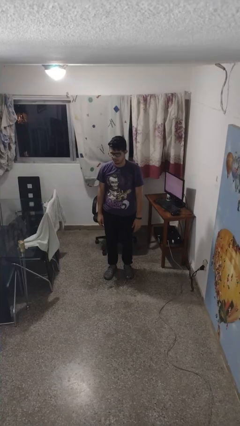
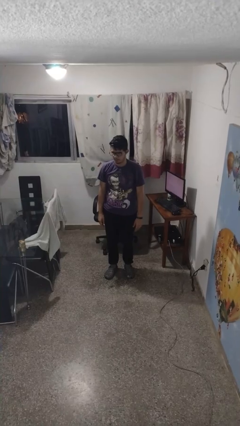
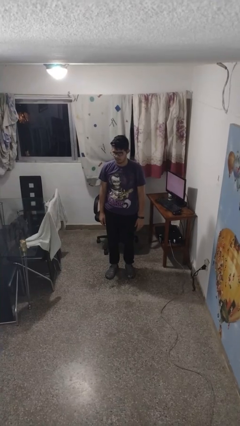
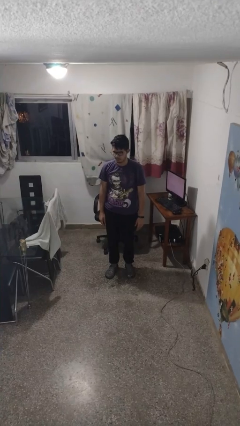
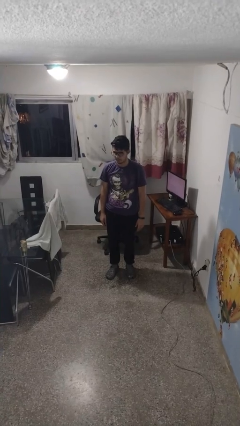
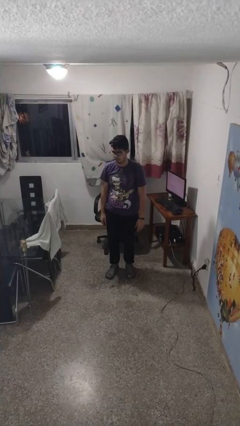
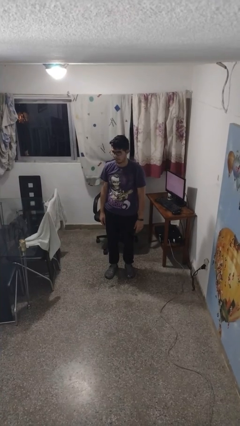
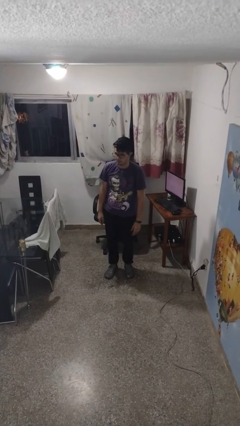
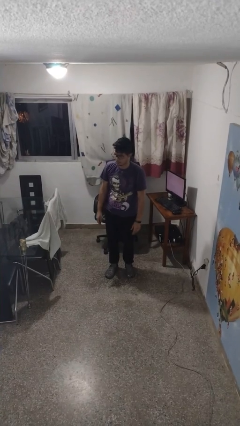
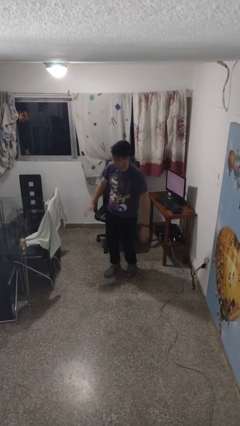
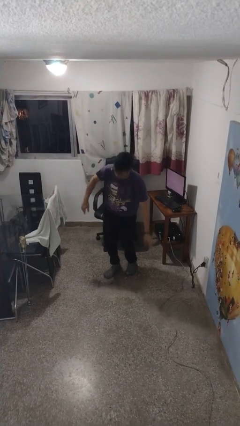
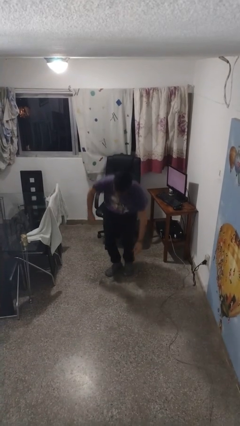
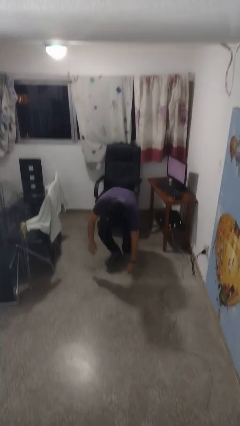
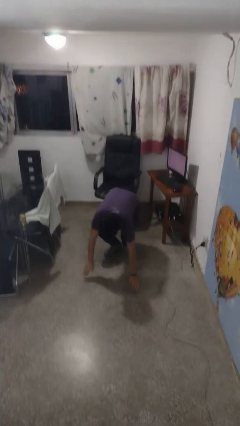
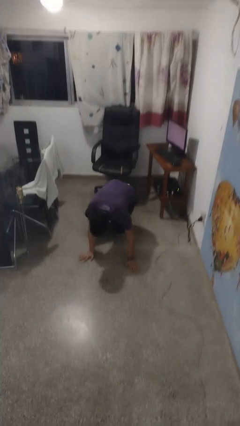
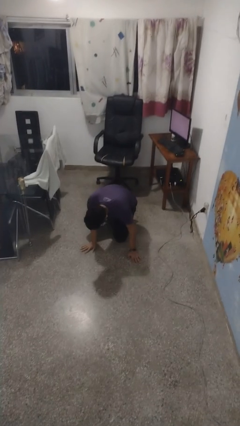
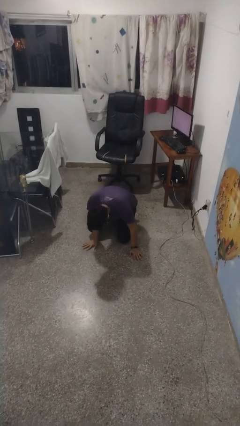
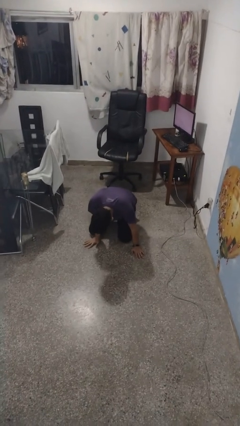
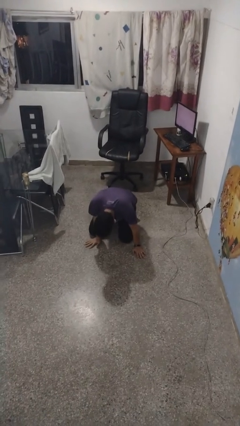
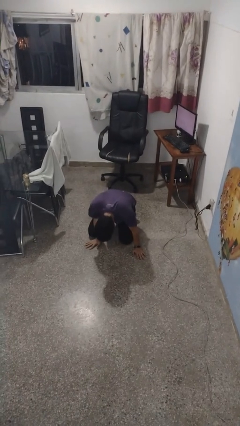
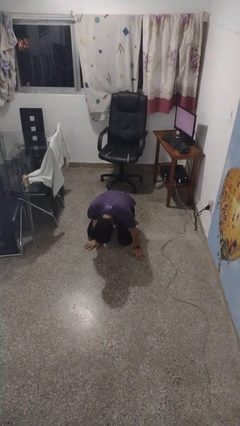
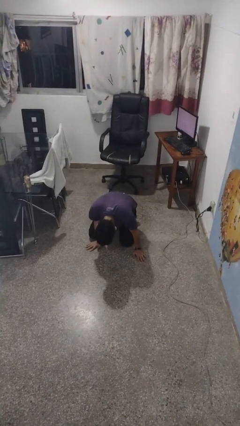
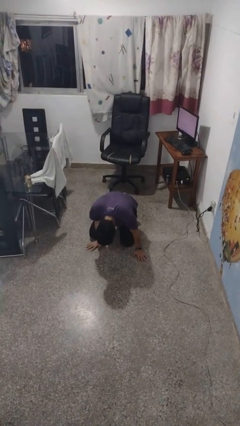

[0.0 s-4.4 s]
person falls while standing

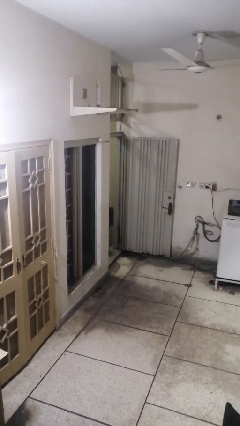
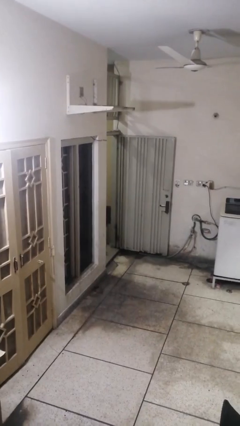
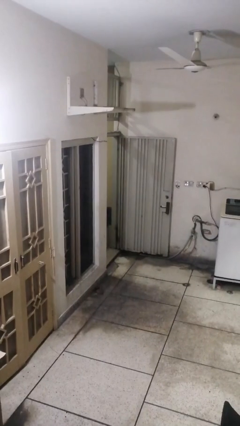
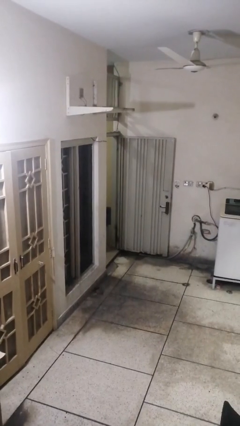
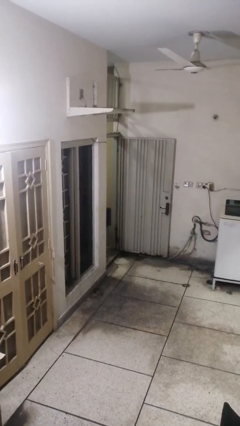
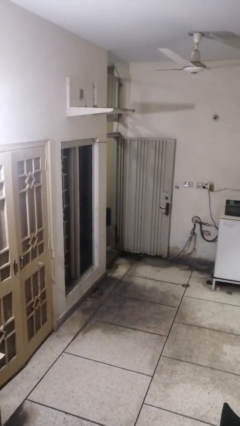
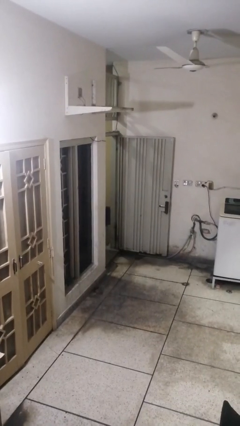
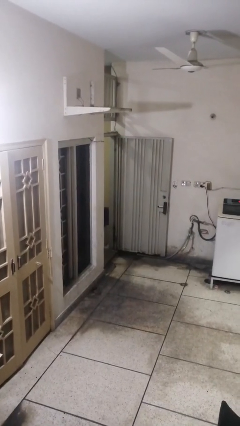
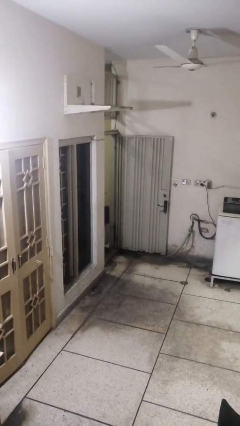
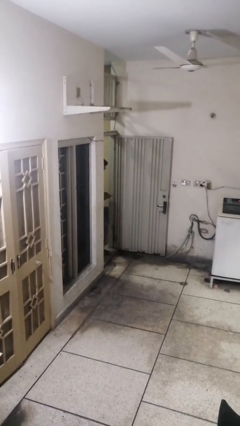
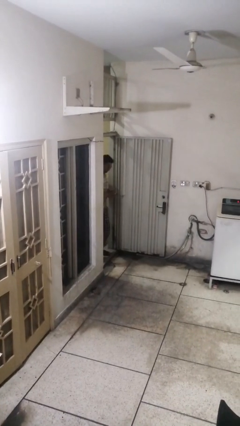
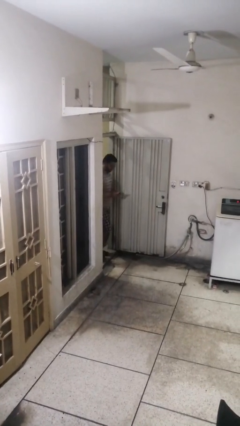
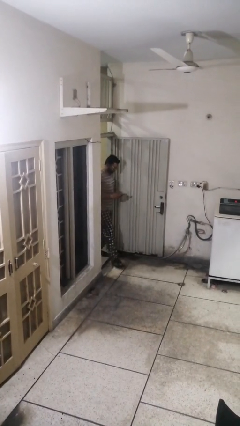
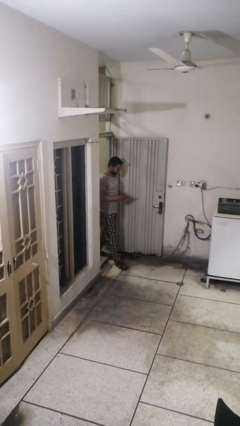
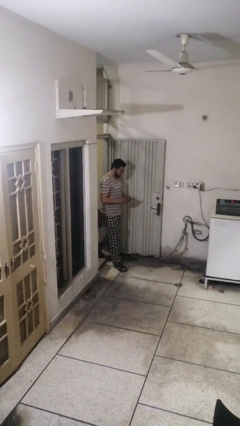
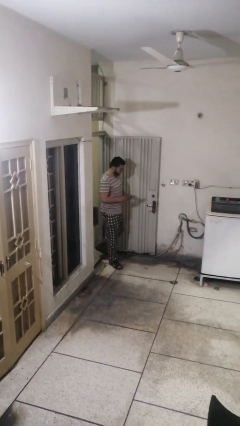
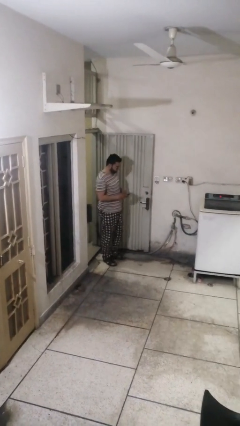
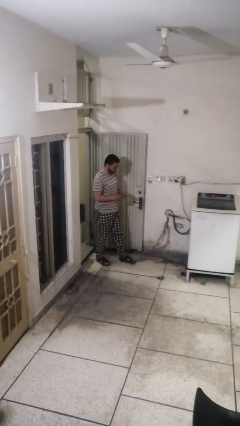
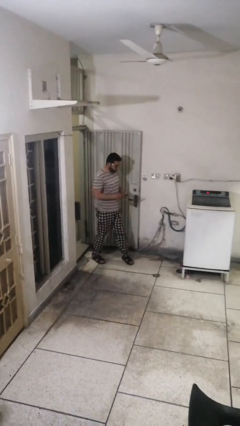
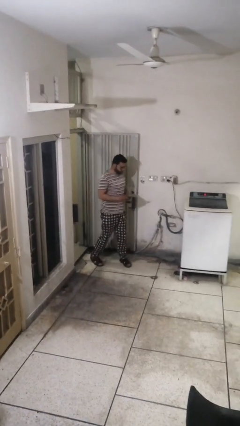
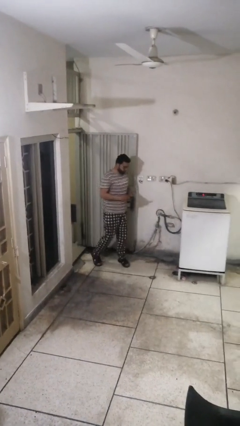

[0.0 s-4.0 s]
person enters scene through structure

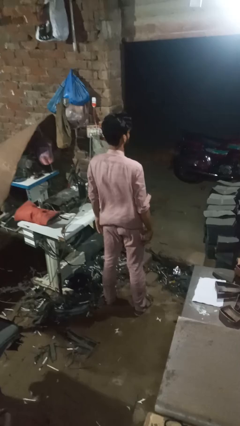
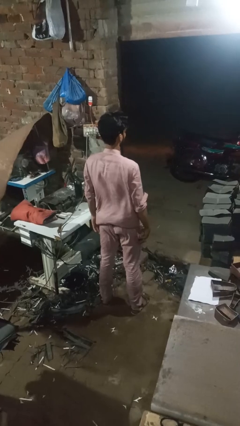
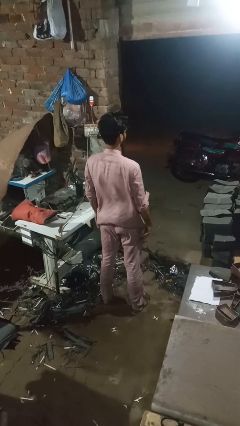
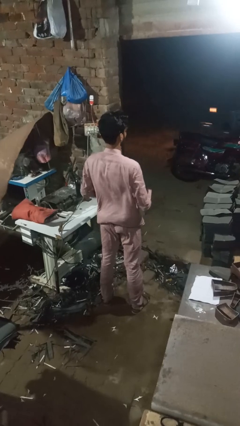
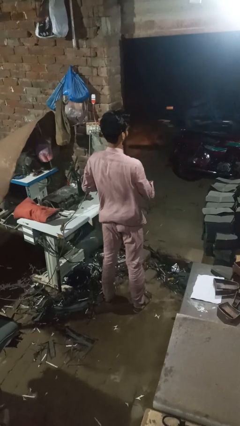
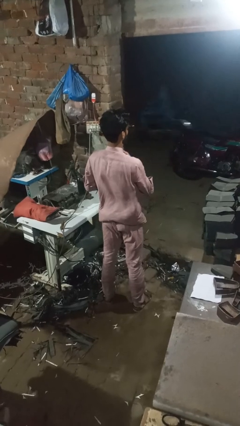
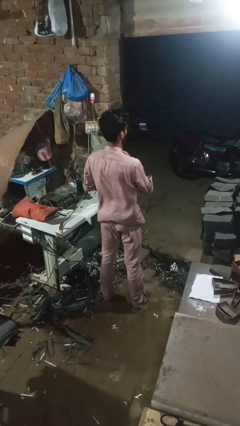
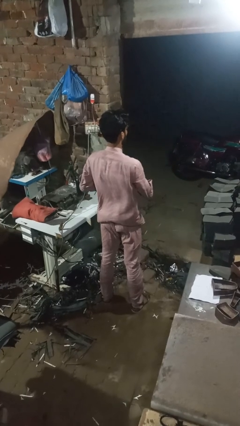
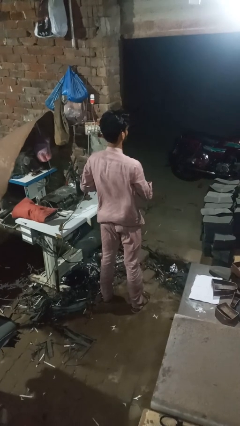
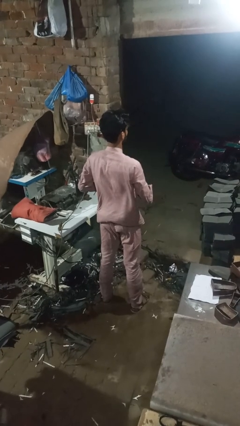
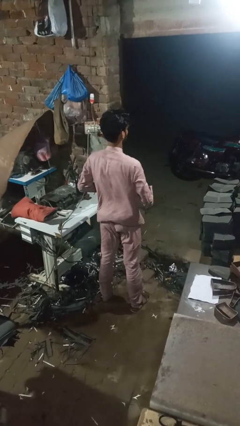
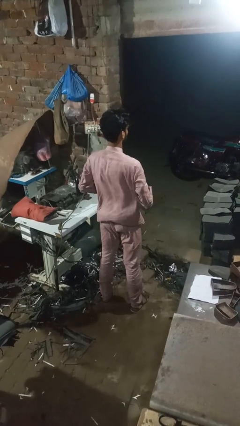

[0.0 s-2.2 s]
person unbuttons shirt

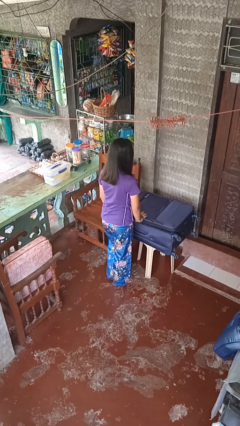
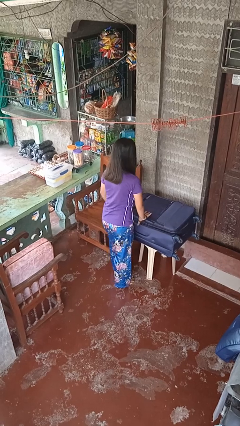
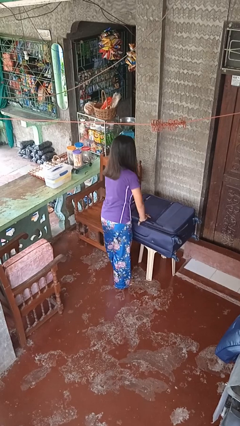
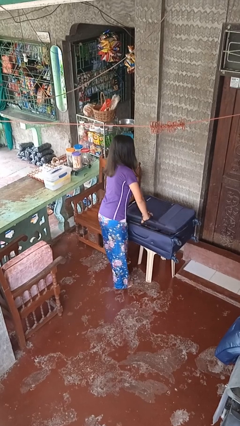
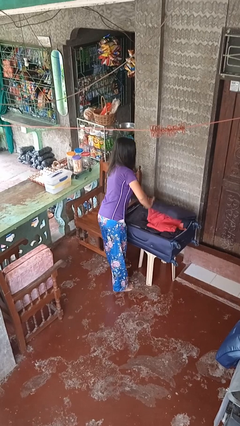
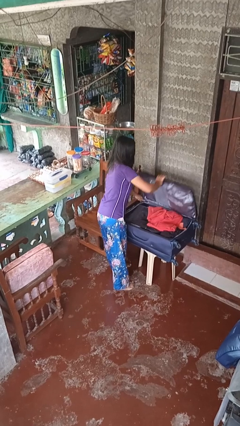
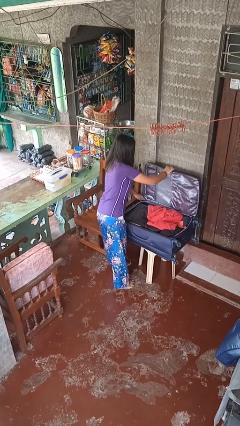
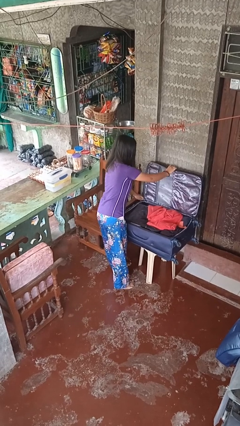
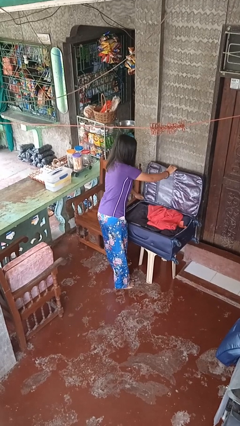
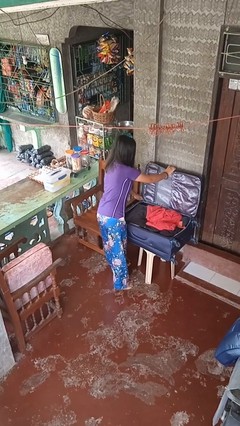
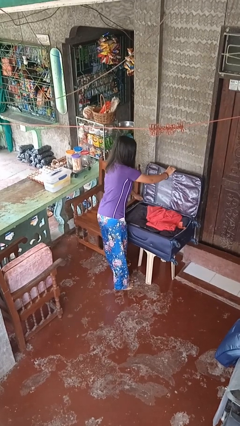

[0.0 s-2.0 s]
person opens suitcase

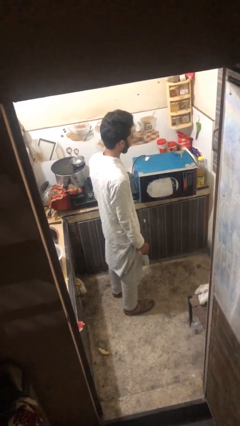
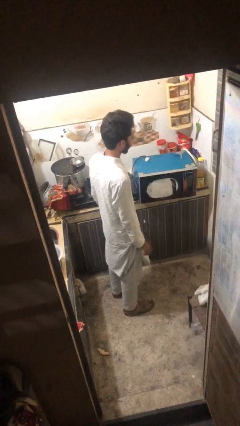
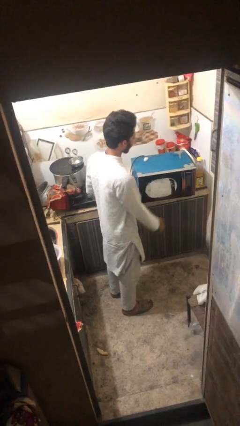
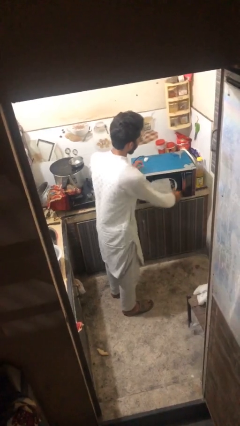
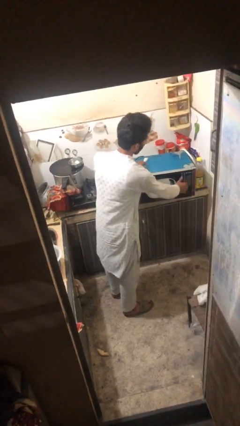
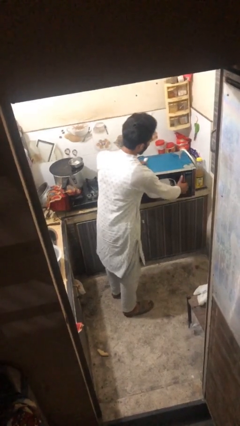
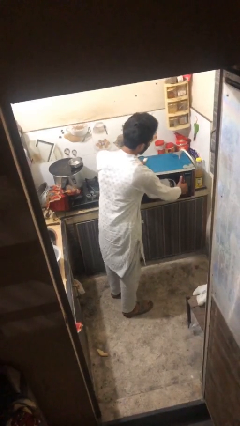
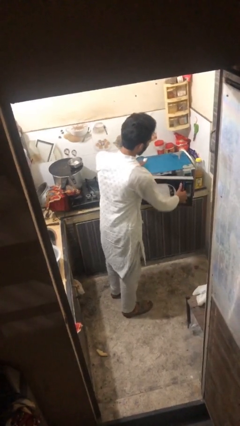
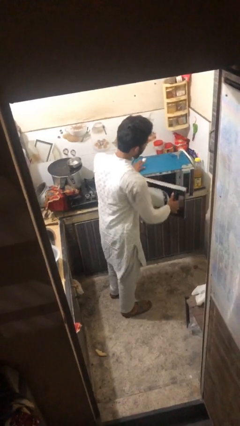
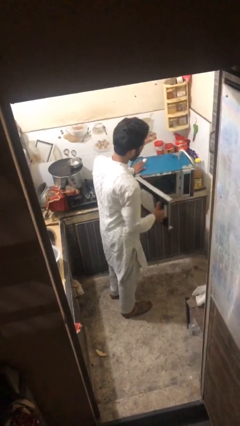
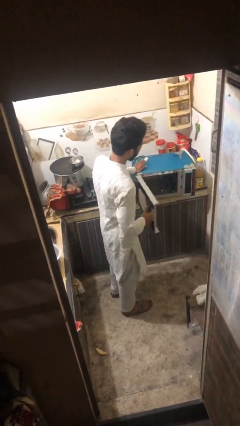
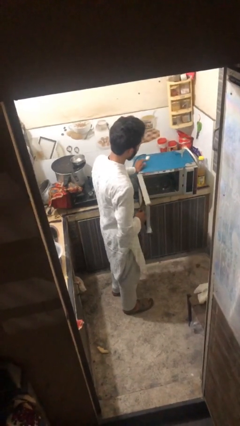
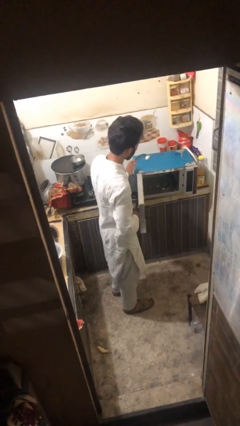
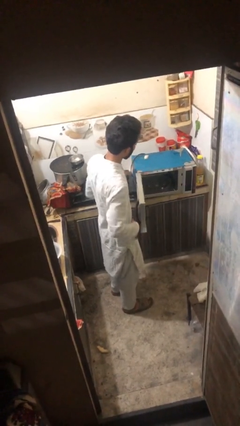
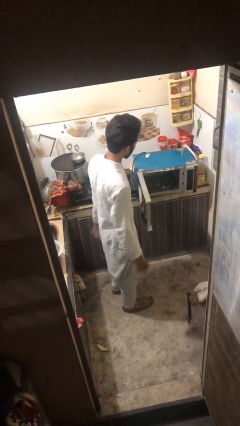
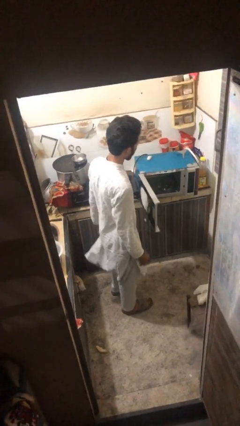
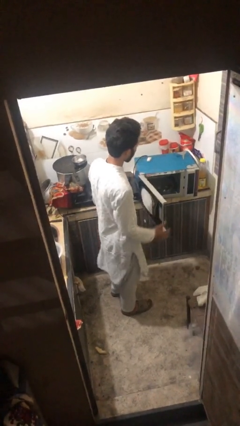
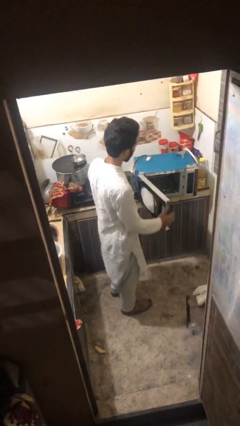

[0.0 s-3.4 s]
person opens oven door

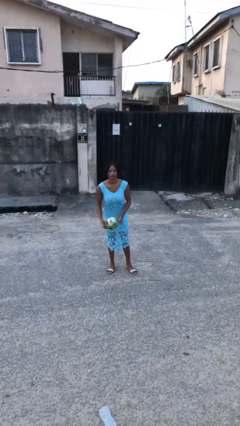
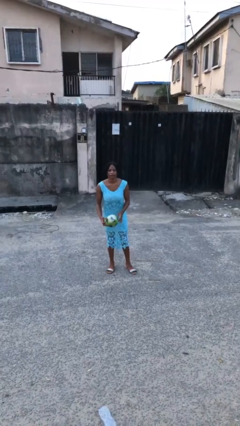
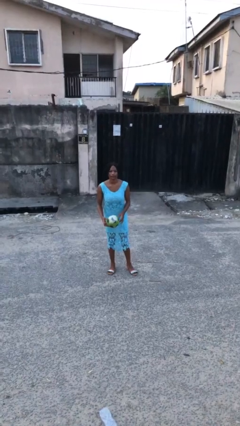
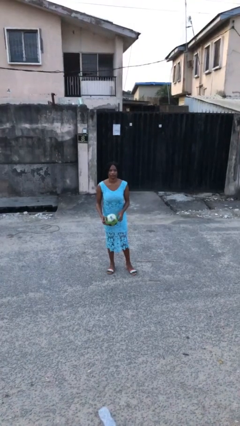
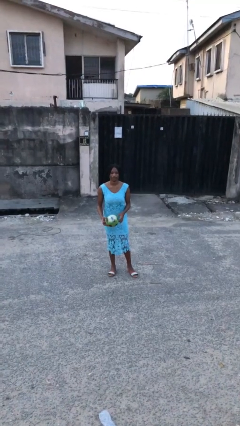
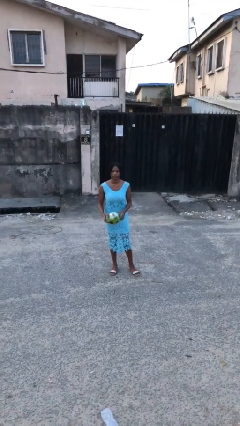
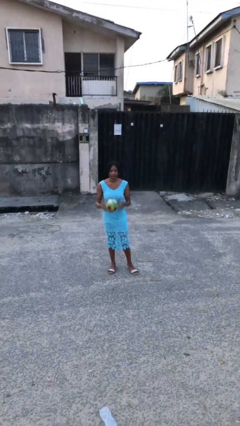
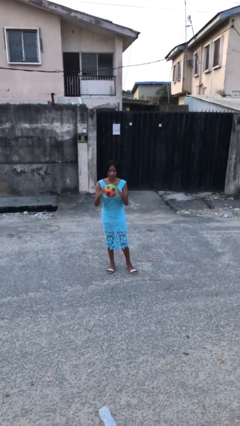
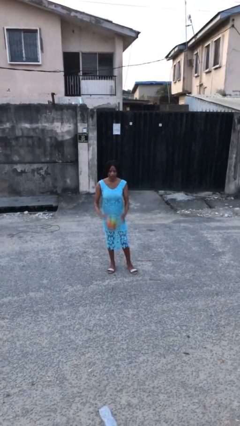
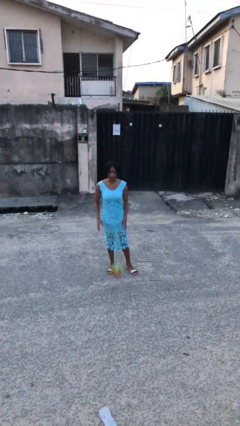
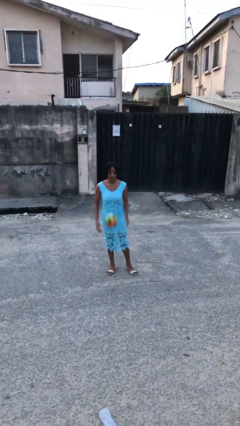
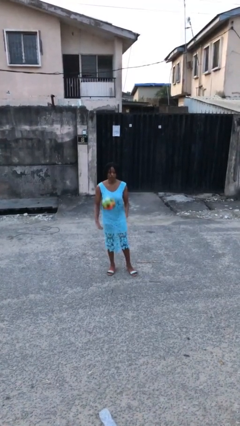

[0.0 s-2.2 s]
person bounces ball on floor
